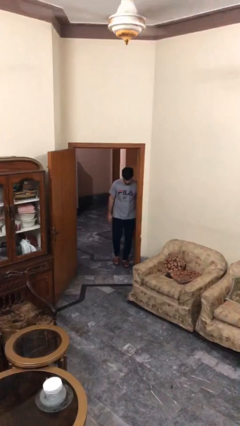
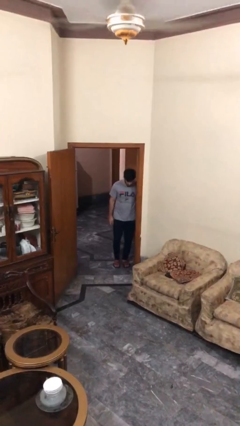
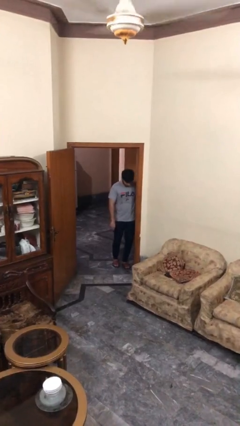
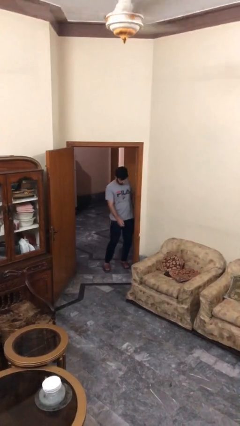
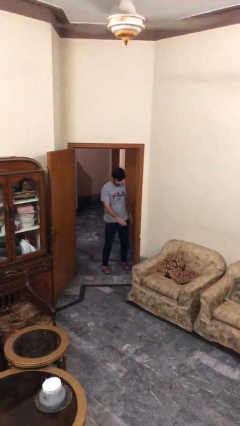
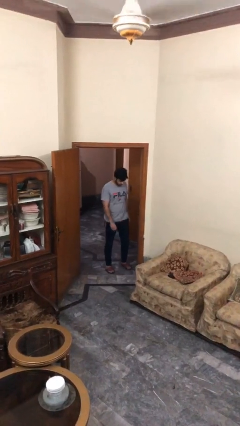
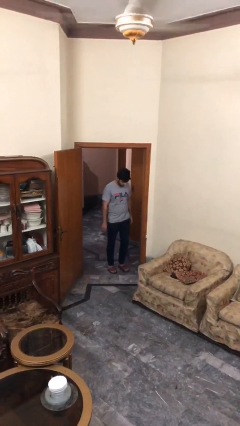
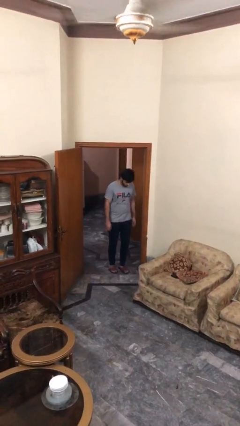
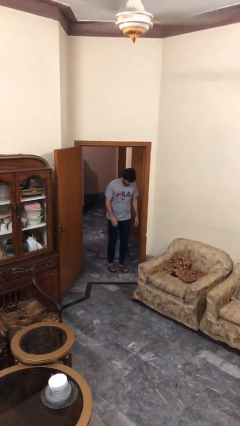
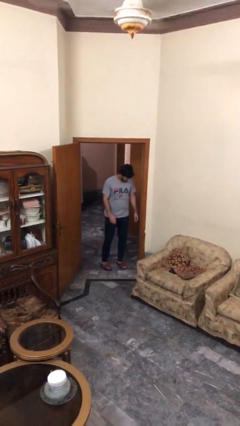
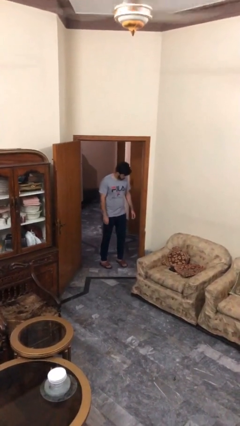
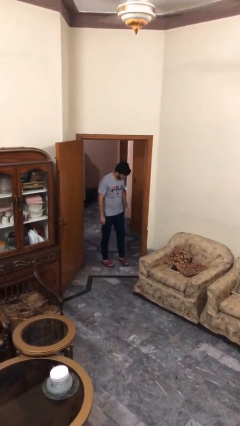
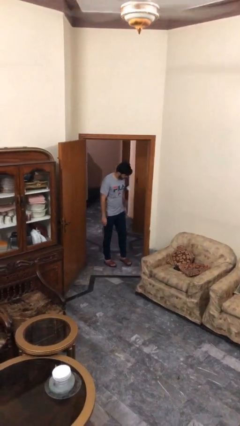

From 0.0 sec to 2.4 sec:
person bumps into wall

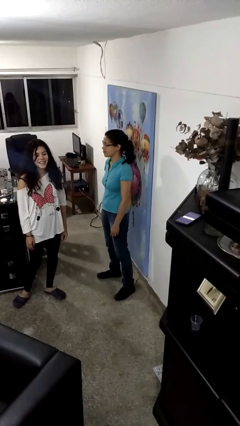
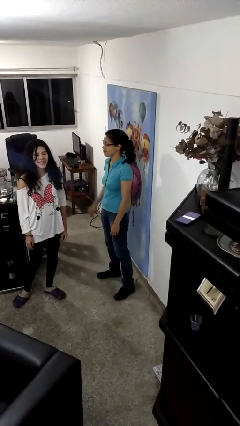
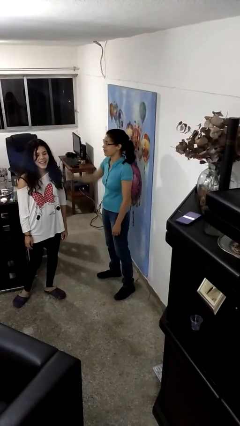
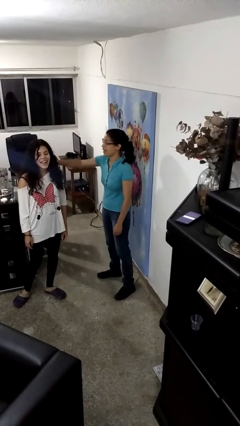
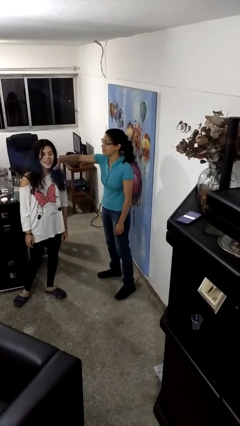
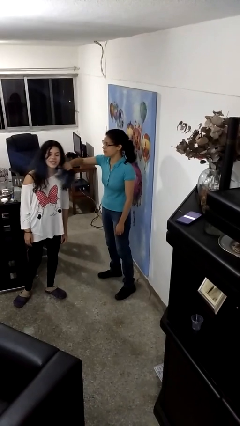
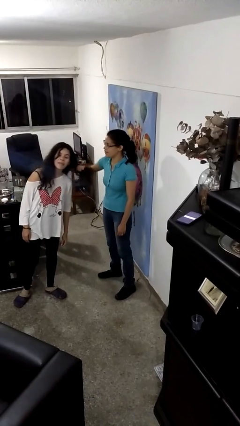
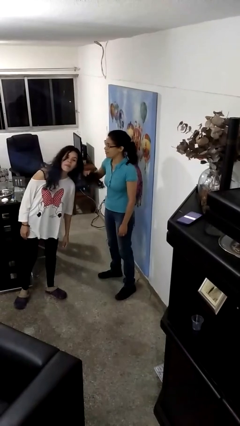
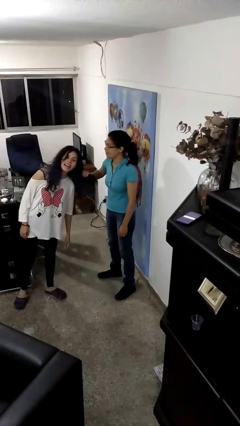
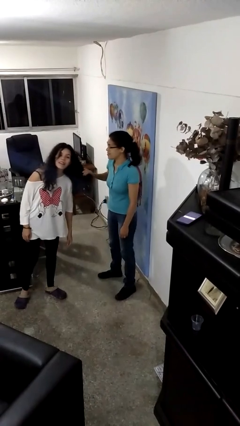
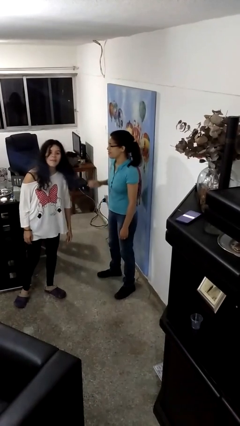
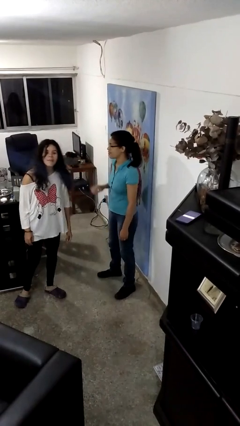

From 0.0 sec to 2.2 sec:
person grabs person by hair

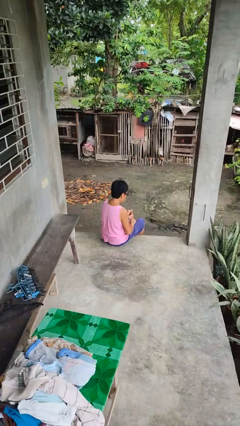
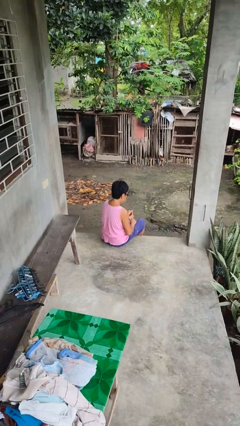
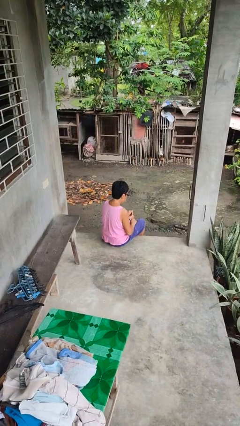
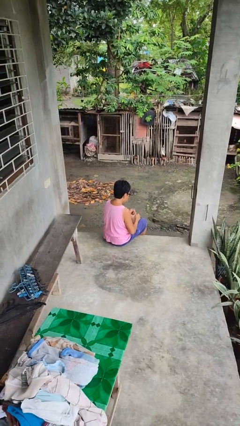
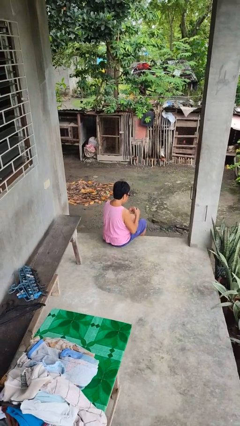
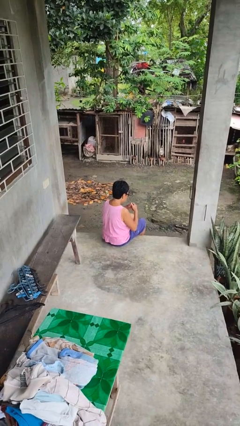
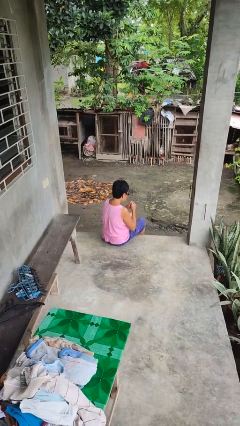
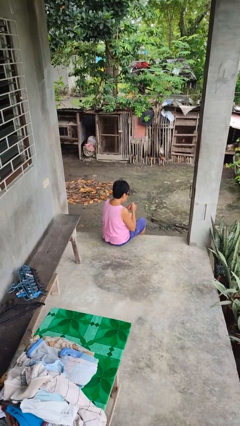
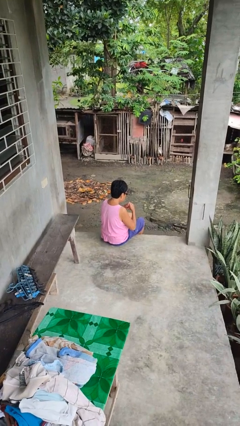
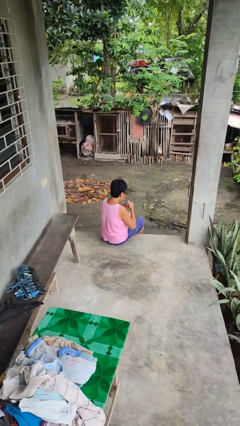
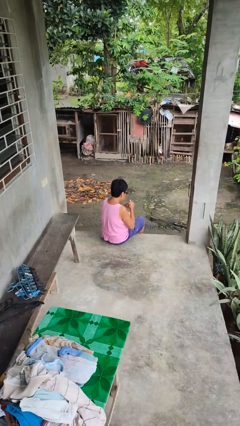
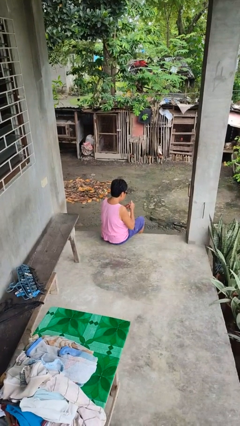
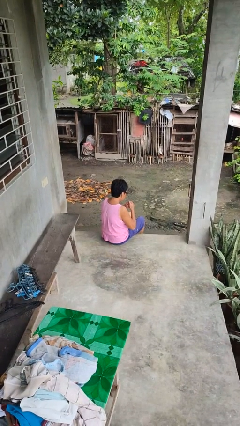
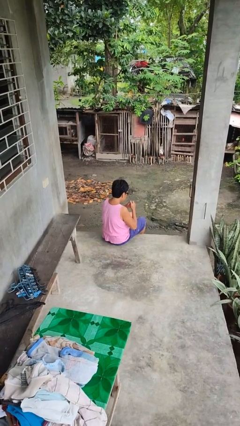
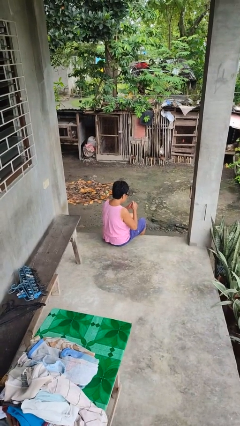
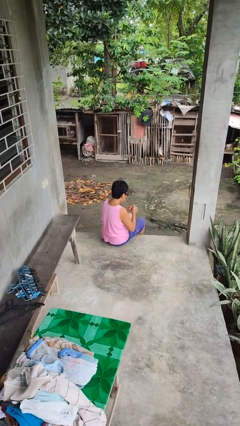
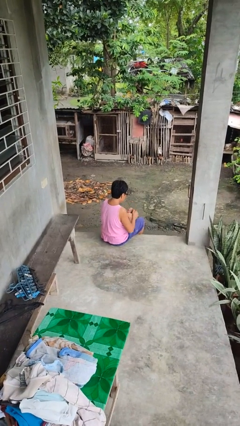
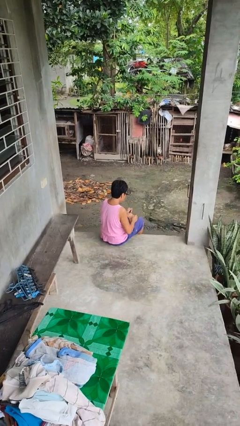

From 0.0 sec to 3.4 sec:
person cracks knuckles

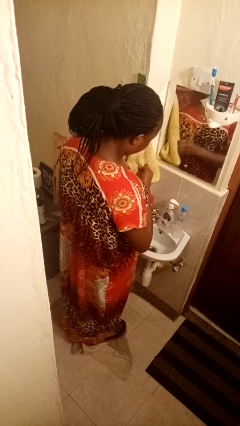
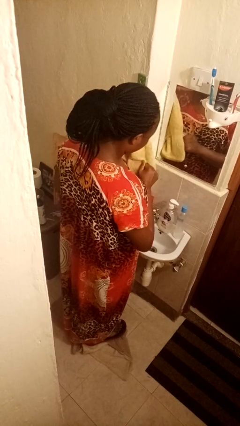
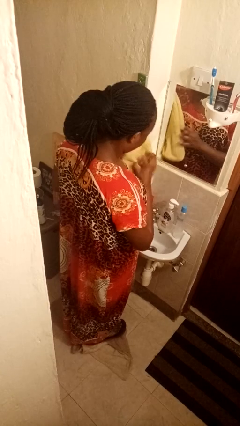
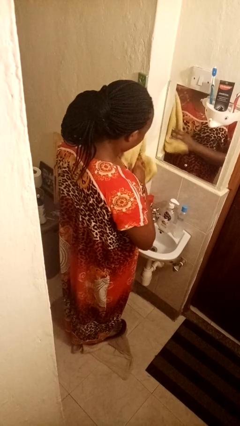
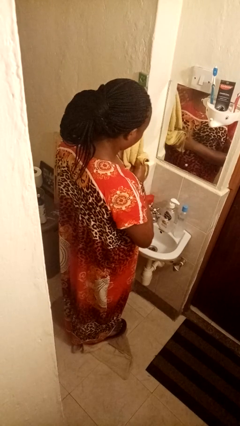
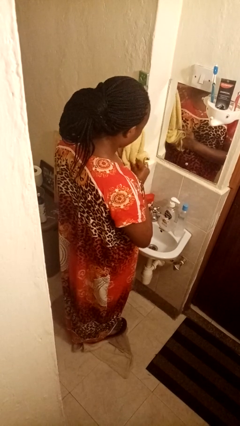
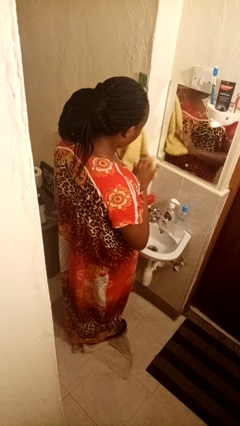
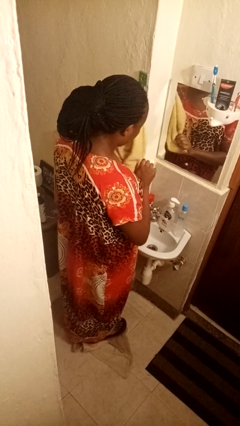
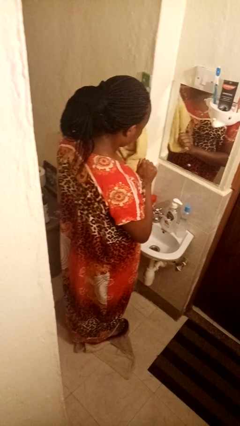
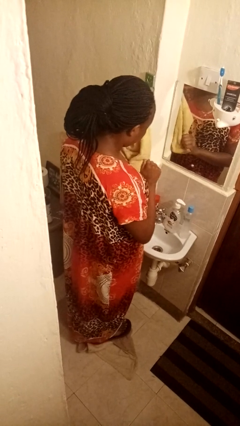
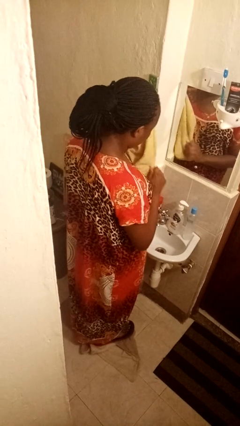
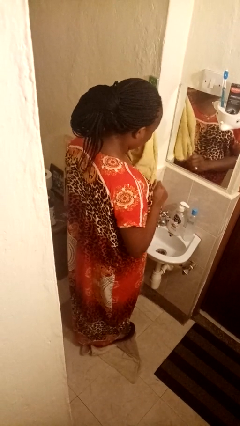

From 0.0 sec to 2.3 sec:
person dries hands with towel

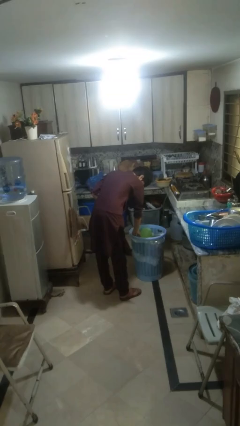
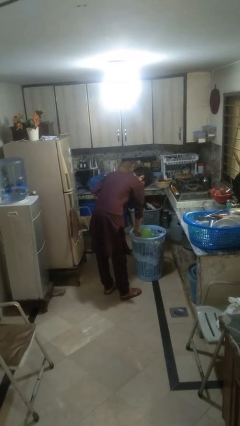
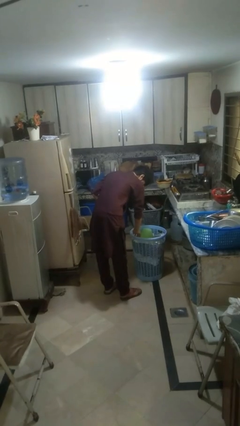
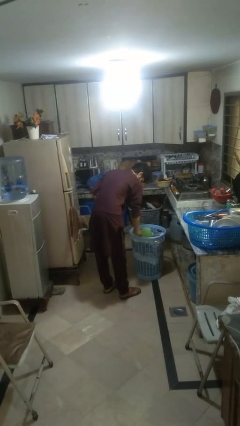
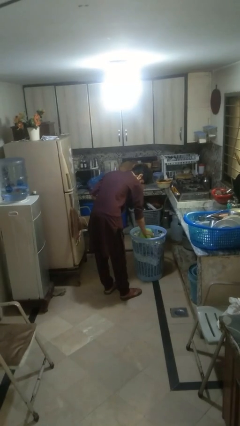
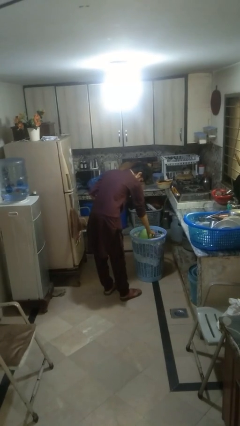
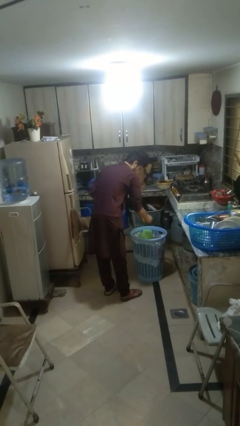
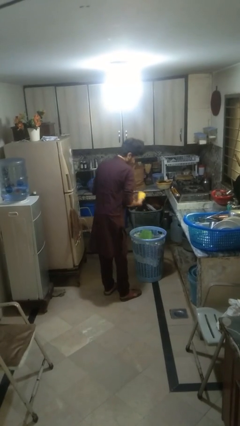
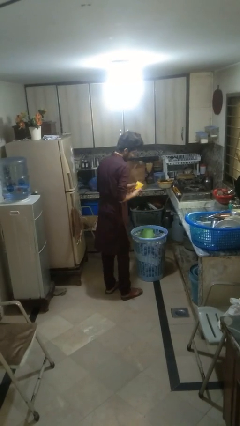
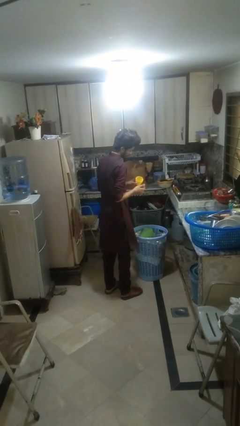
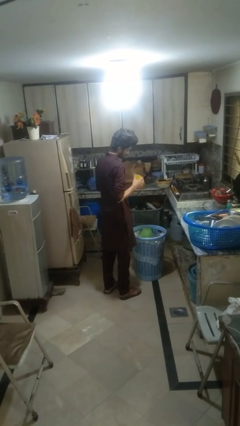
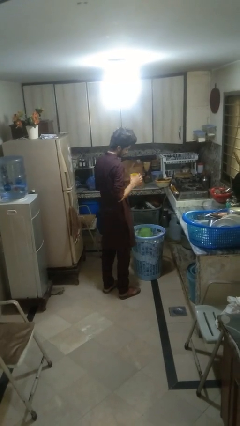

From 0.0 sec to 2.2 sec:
person takes object from basket

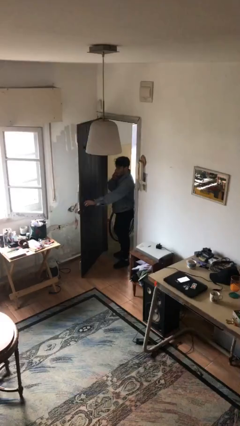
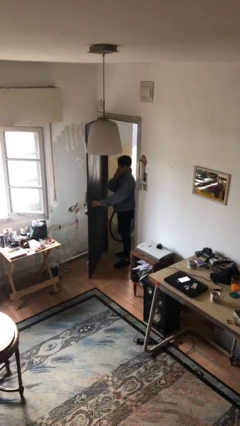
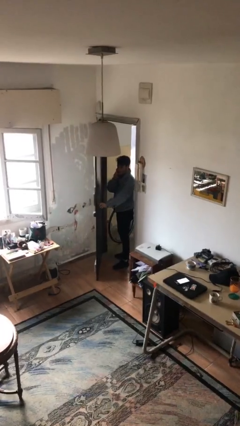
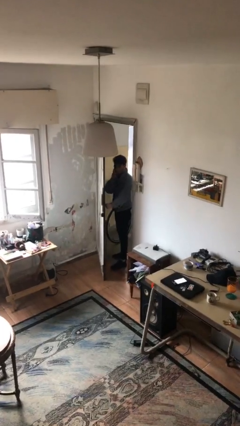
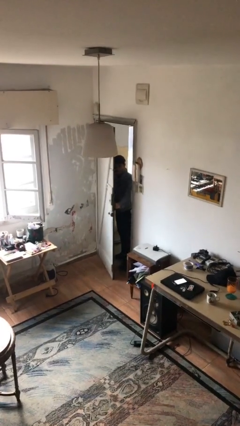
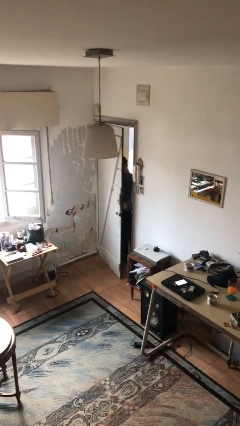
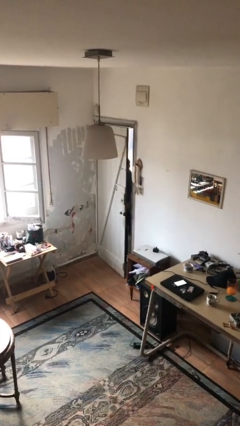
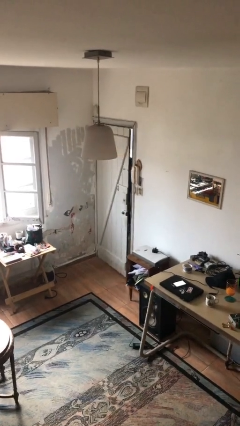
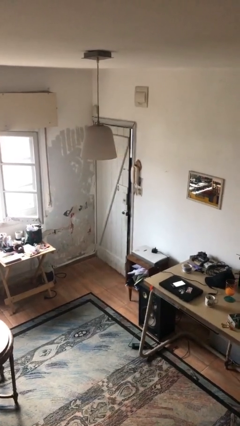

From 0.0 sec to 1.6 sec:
person closes facility door

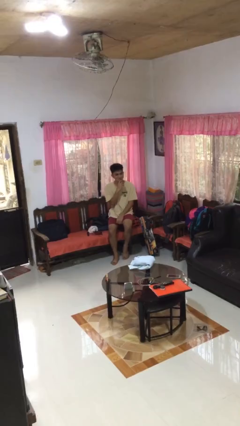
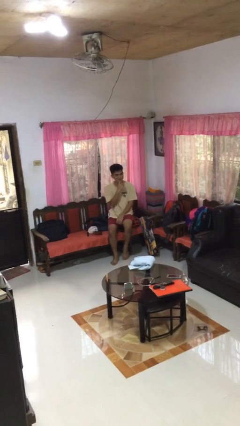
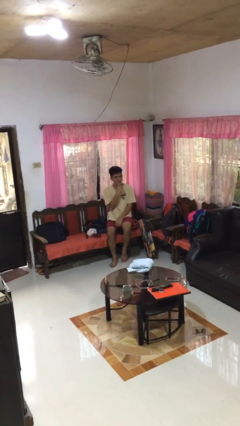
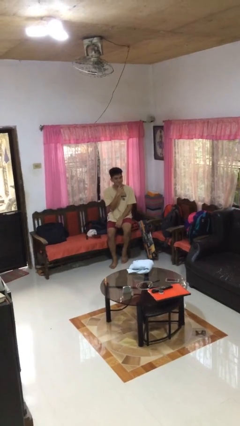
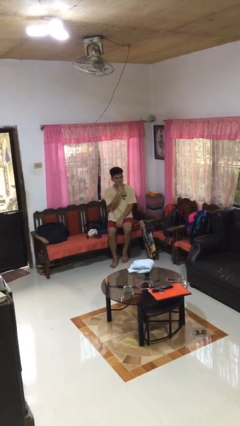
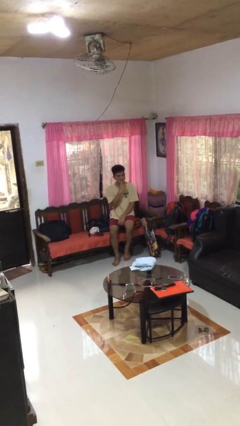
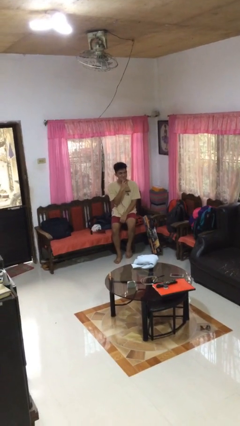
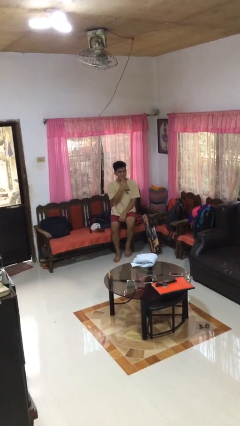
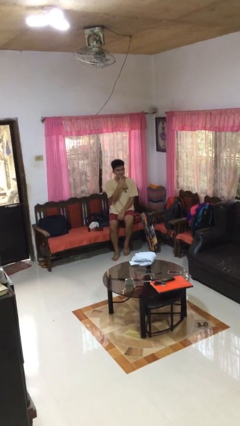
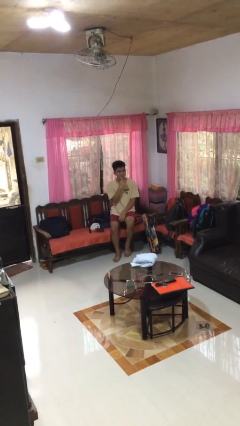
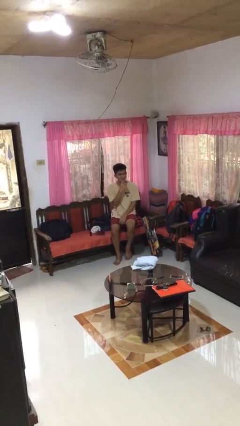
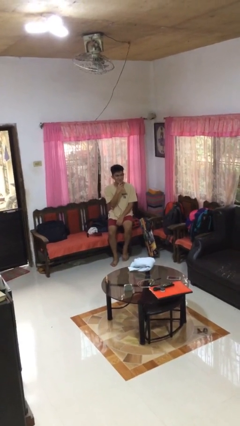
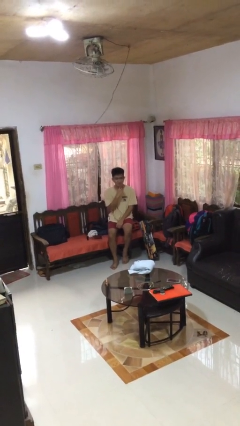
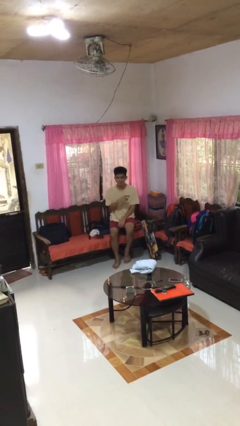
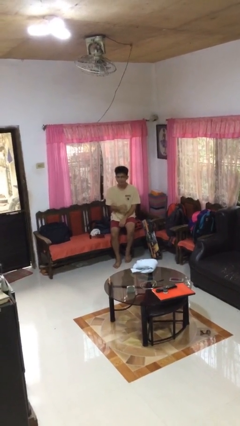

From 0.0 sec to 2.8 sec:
person strokes chin
